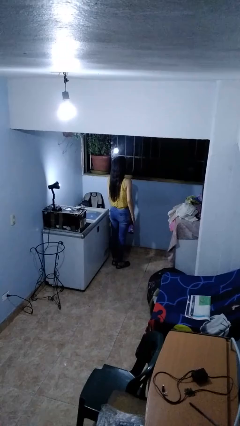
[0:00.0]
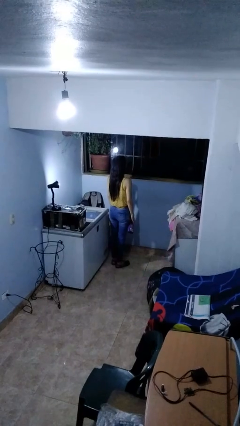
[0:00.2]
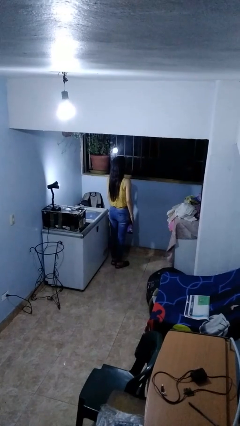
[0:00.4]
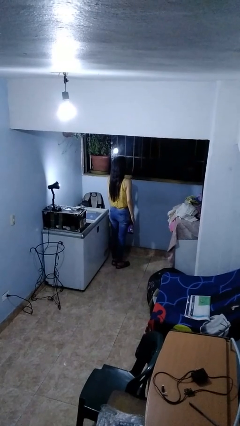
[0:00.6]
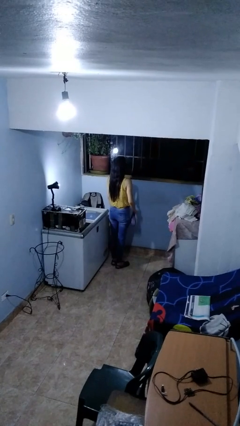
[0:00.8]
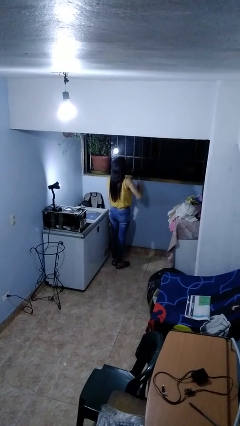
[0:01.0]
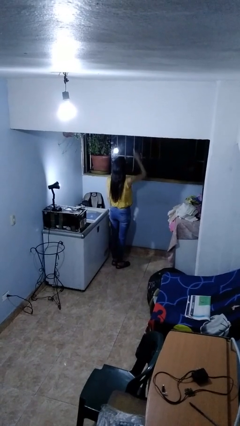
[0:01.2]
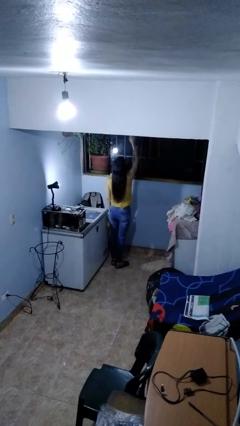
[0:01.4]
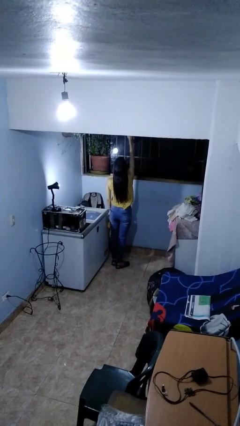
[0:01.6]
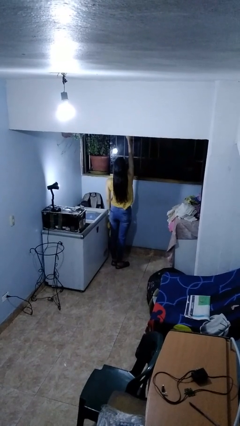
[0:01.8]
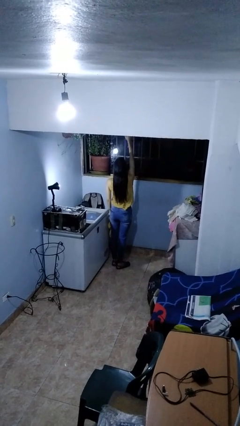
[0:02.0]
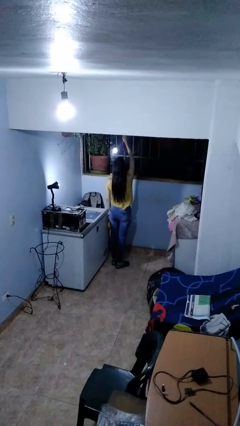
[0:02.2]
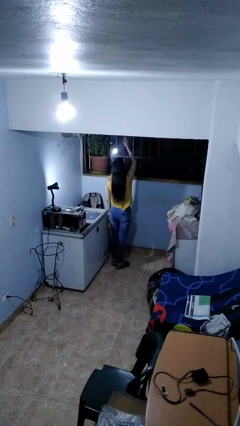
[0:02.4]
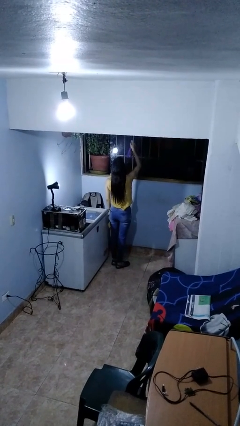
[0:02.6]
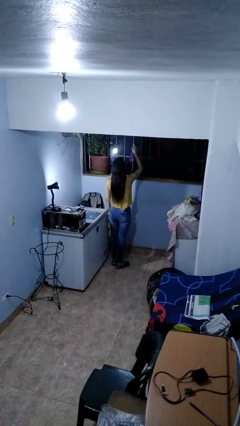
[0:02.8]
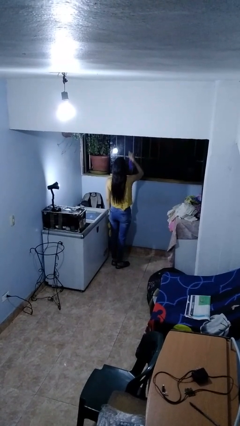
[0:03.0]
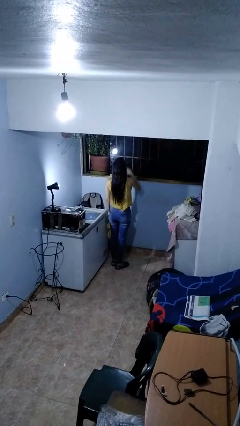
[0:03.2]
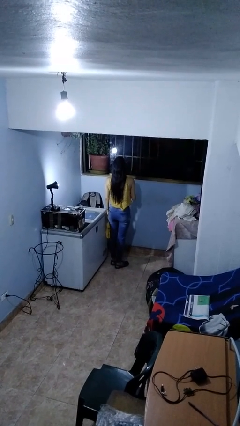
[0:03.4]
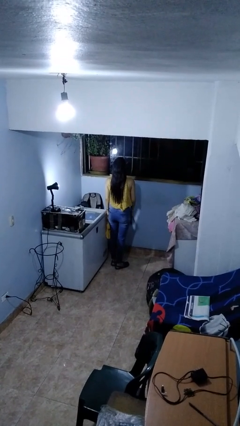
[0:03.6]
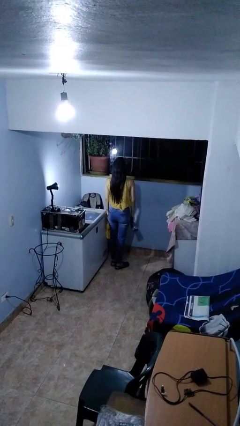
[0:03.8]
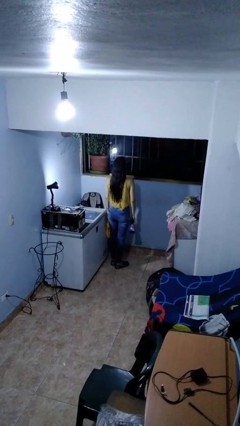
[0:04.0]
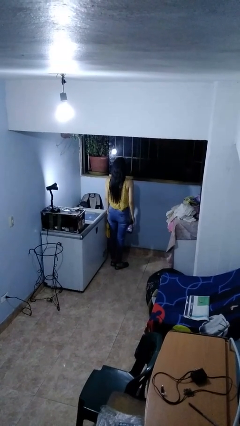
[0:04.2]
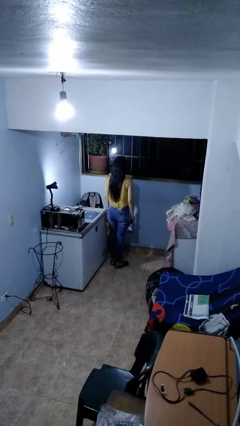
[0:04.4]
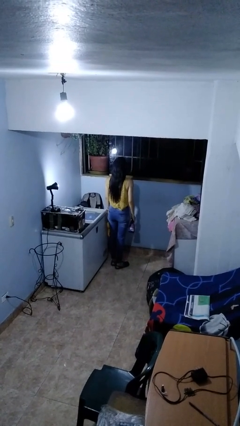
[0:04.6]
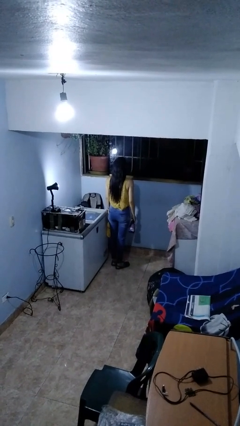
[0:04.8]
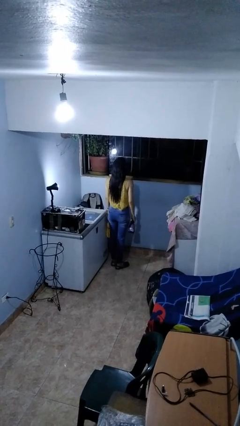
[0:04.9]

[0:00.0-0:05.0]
person sprays from bottle

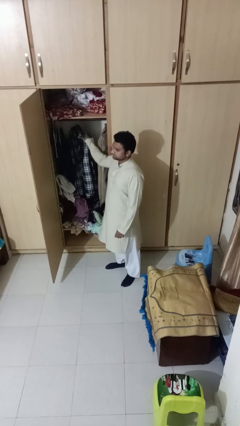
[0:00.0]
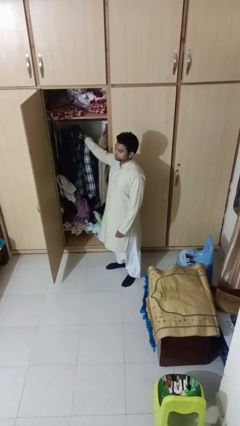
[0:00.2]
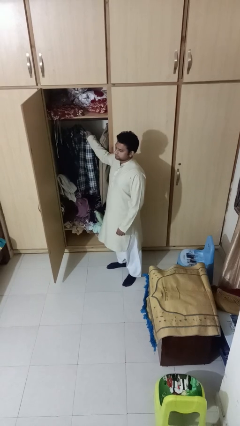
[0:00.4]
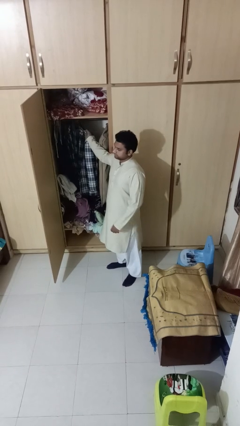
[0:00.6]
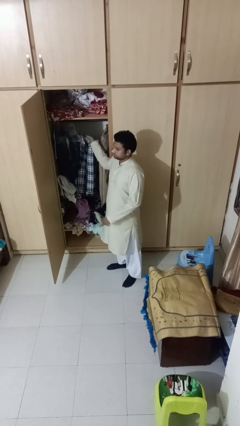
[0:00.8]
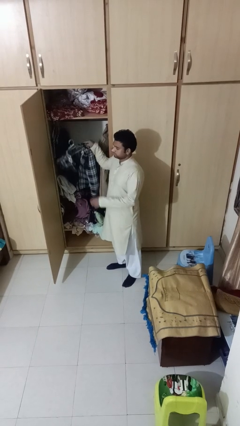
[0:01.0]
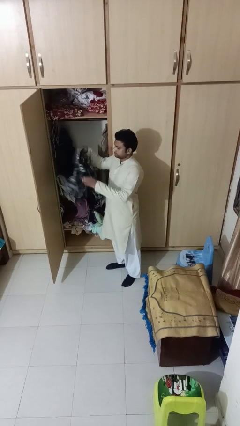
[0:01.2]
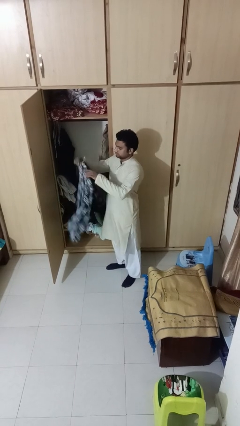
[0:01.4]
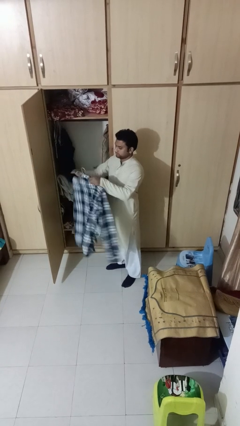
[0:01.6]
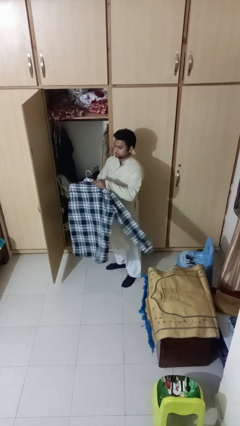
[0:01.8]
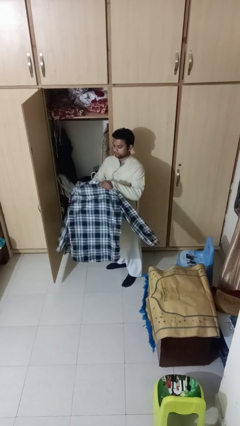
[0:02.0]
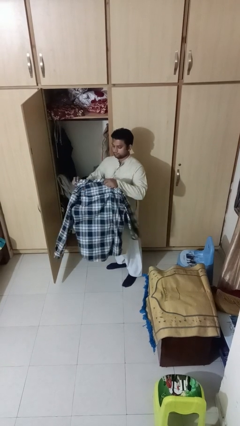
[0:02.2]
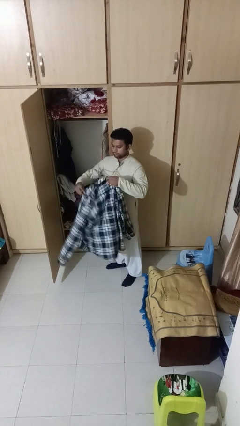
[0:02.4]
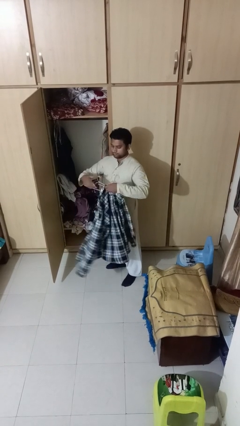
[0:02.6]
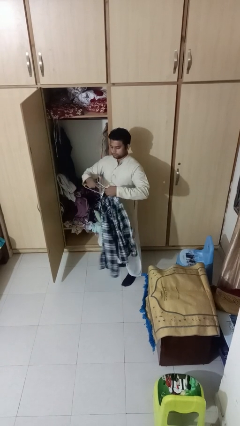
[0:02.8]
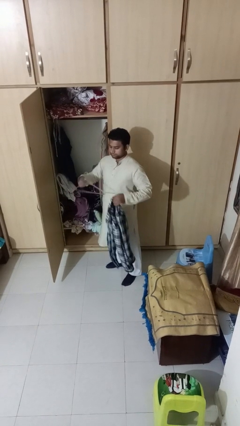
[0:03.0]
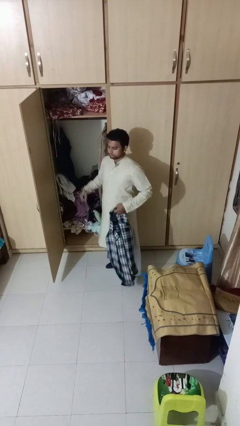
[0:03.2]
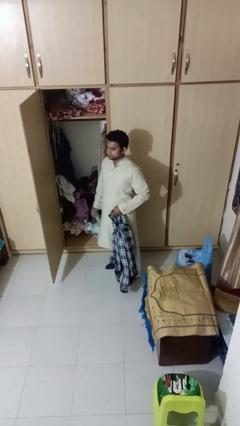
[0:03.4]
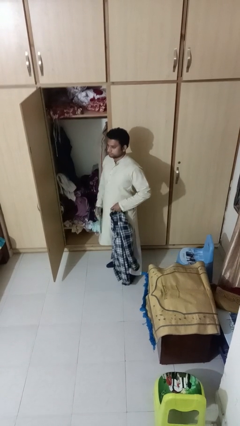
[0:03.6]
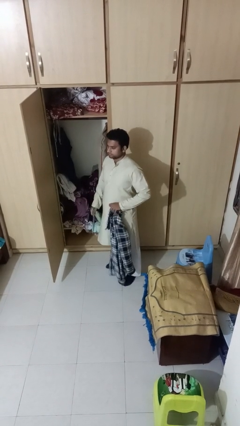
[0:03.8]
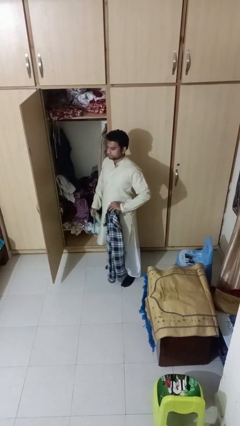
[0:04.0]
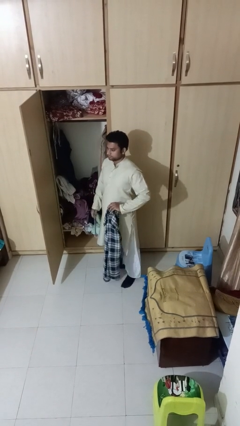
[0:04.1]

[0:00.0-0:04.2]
person takes clothes from closet

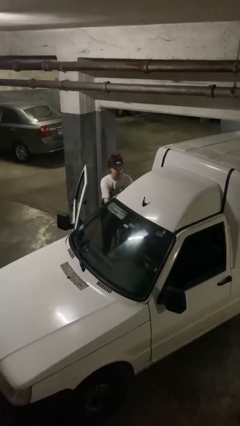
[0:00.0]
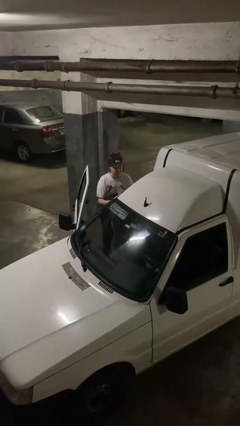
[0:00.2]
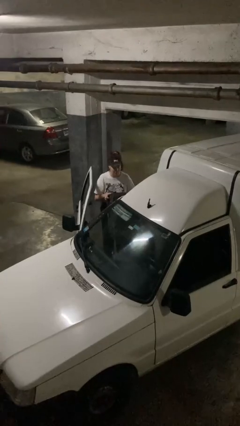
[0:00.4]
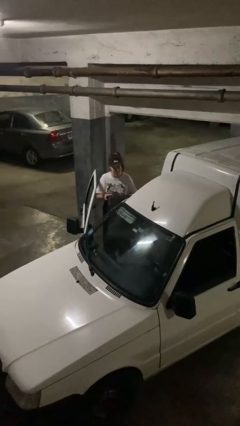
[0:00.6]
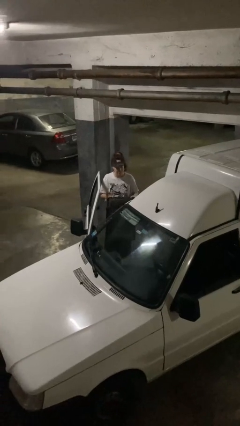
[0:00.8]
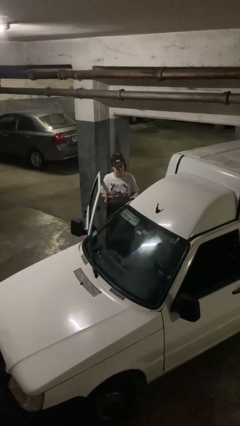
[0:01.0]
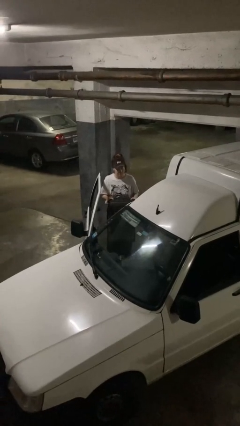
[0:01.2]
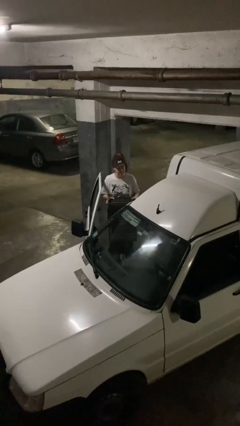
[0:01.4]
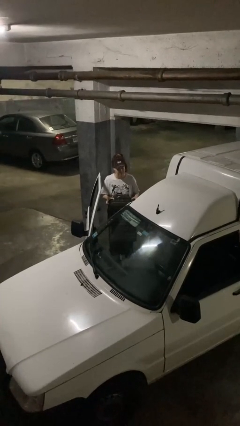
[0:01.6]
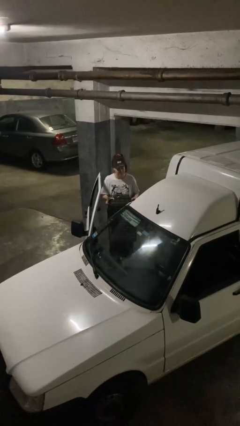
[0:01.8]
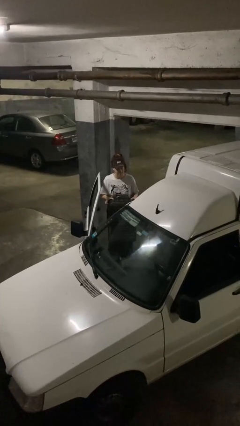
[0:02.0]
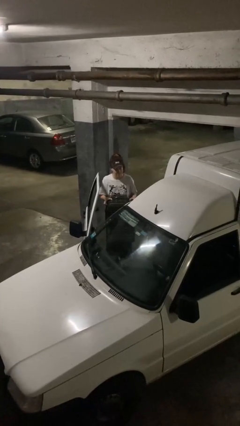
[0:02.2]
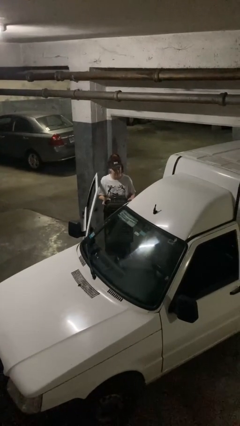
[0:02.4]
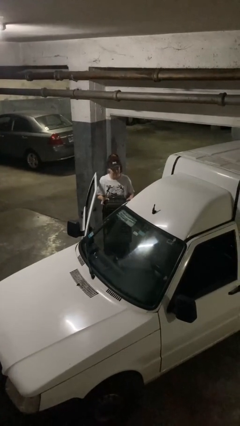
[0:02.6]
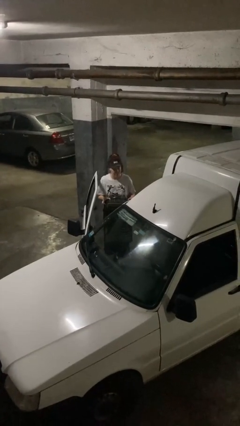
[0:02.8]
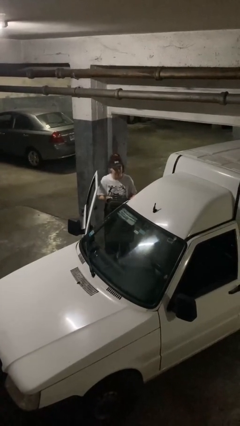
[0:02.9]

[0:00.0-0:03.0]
person unloads car

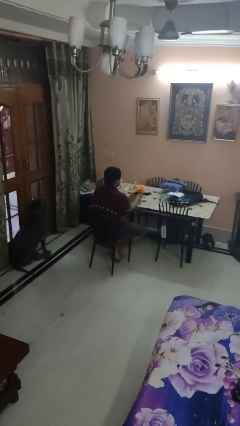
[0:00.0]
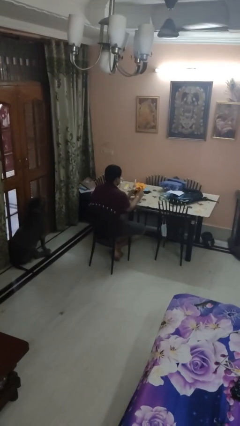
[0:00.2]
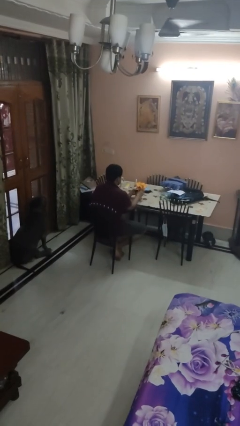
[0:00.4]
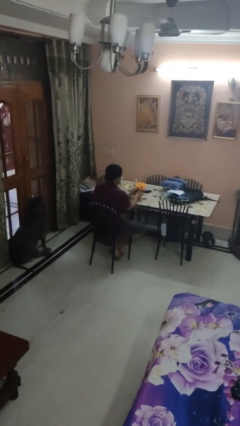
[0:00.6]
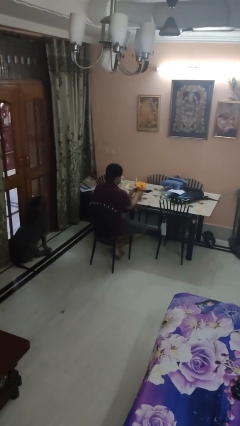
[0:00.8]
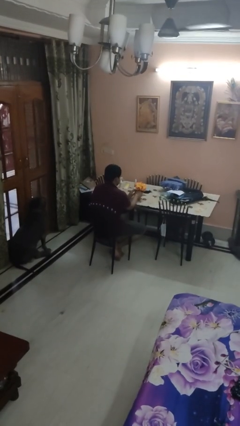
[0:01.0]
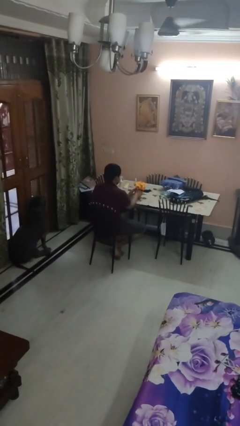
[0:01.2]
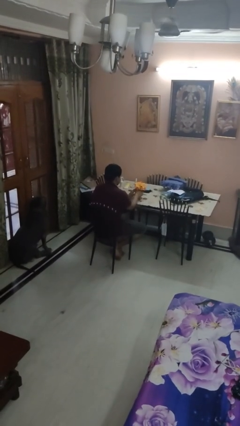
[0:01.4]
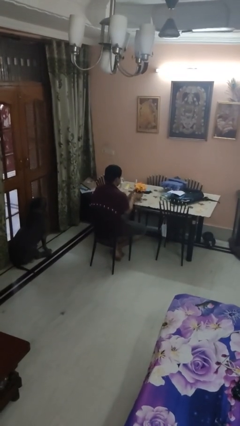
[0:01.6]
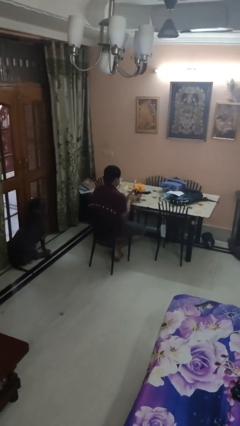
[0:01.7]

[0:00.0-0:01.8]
person arranges flowers in vase

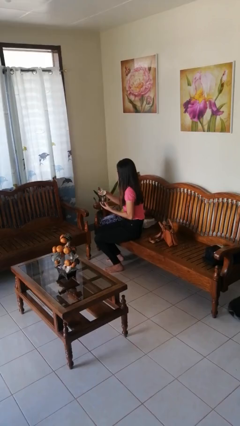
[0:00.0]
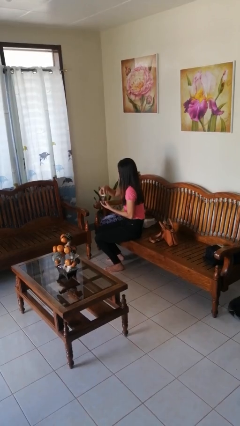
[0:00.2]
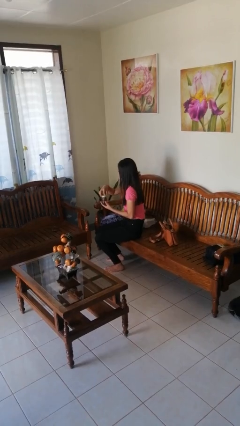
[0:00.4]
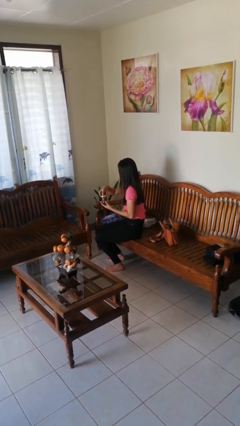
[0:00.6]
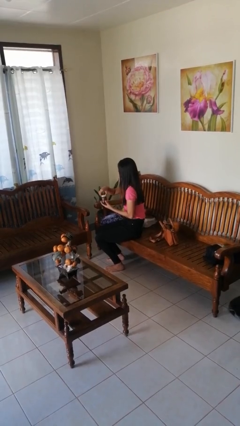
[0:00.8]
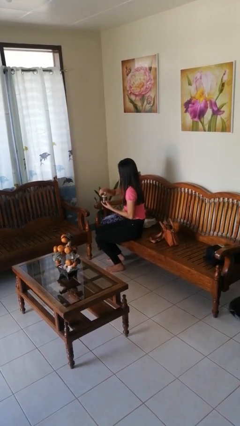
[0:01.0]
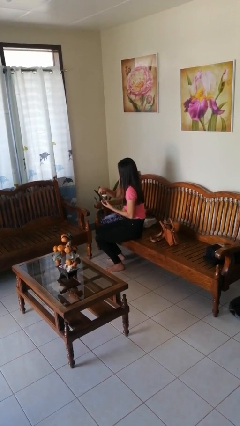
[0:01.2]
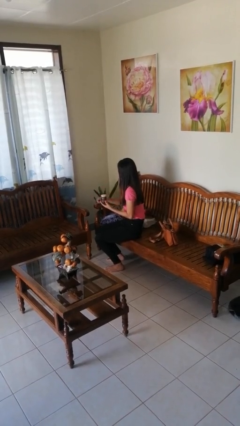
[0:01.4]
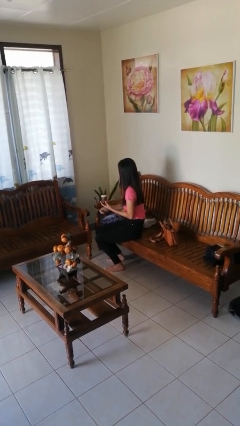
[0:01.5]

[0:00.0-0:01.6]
person closes jar

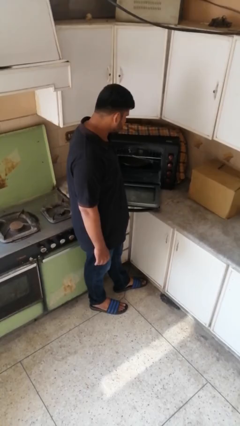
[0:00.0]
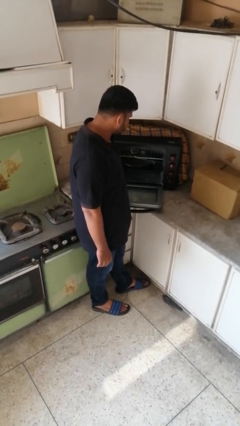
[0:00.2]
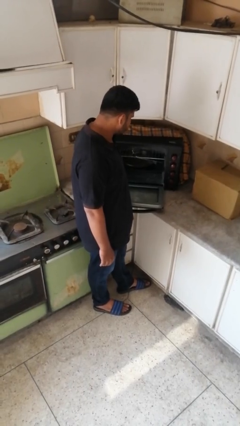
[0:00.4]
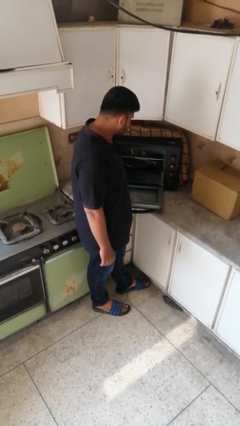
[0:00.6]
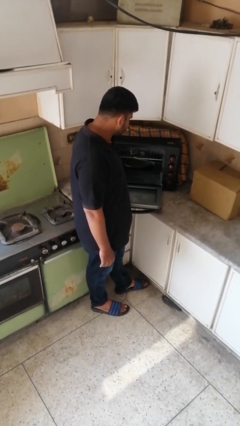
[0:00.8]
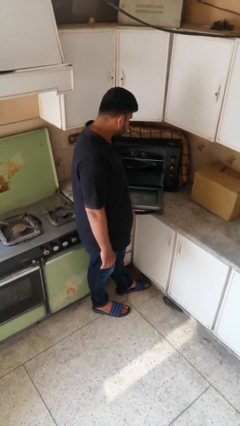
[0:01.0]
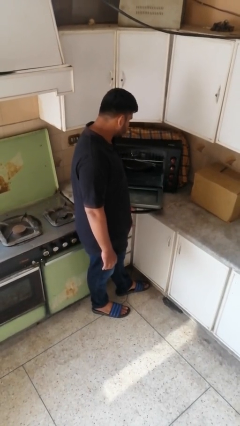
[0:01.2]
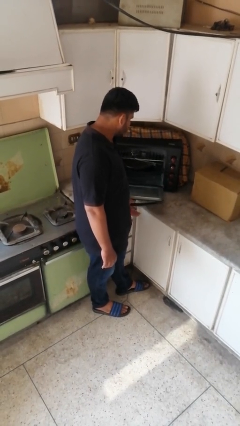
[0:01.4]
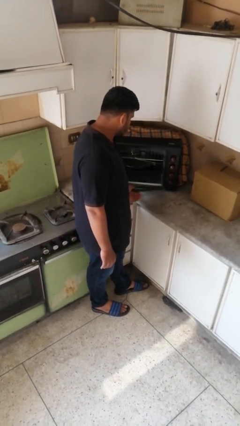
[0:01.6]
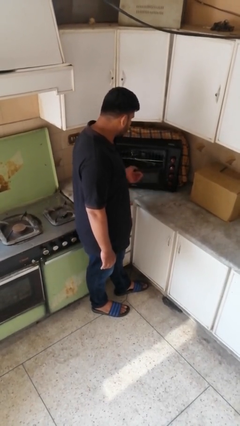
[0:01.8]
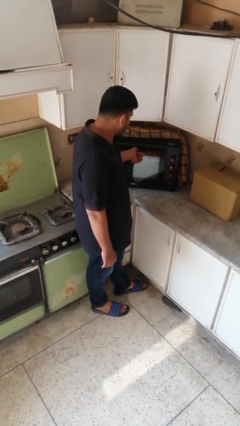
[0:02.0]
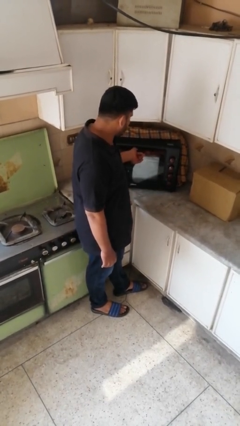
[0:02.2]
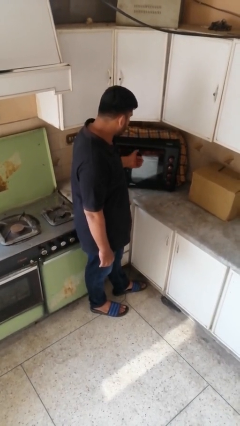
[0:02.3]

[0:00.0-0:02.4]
person closes oven door
